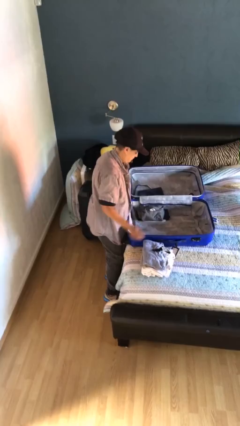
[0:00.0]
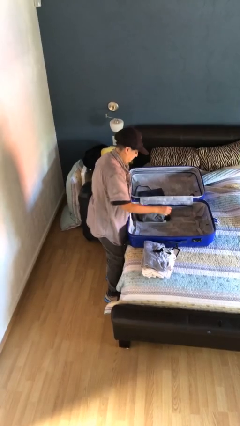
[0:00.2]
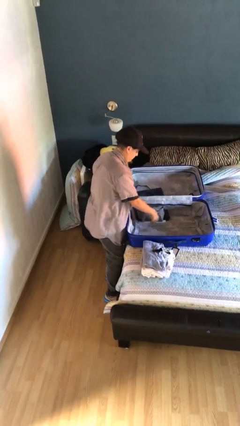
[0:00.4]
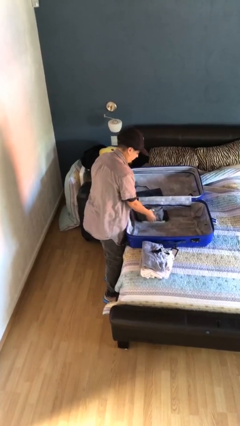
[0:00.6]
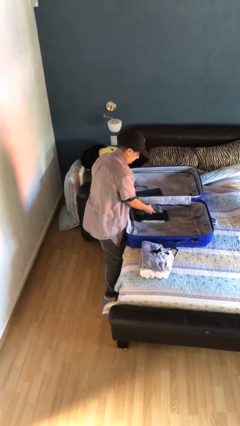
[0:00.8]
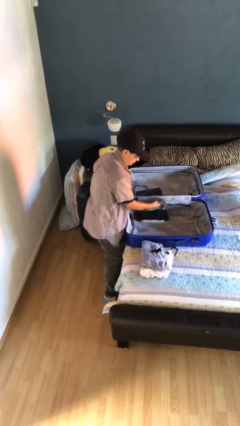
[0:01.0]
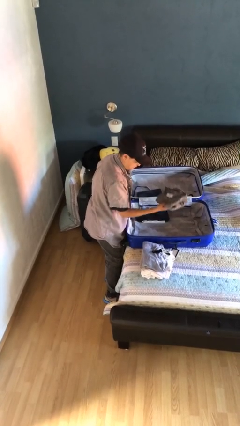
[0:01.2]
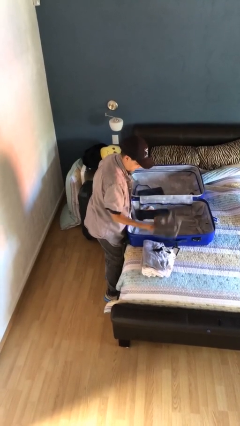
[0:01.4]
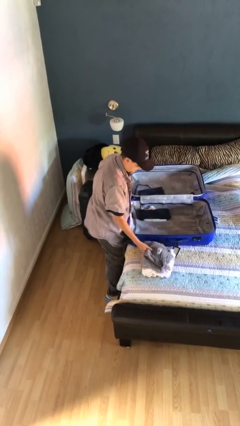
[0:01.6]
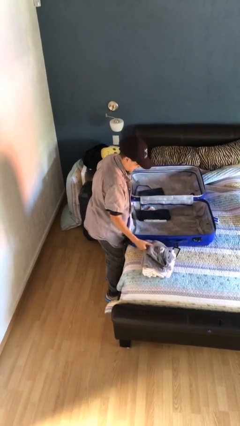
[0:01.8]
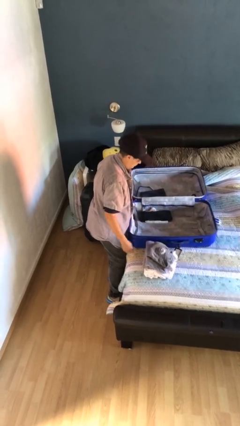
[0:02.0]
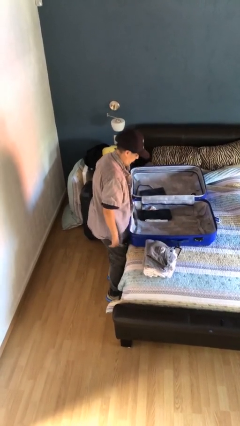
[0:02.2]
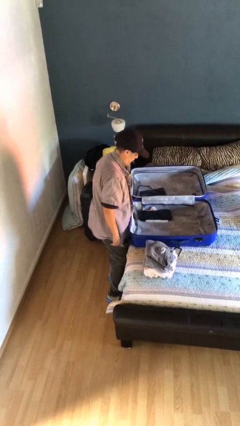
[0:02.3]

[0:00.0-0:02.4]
person unloads clothes from suitcase

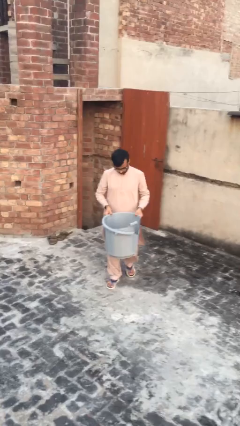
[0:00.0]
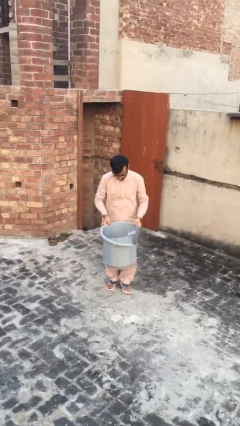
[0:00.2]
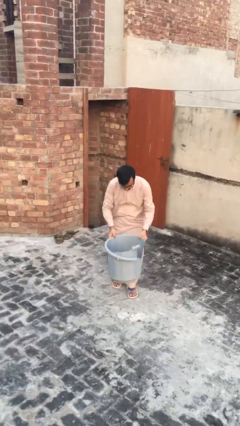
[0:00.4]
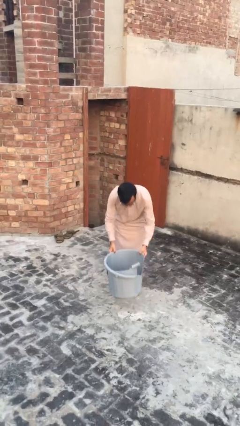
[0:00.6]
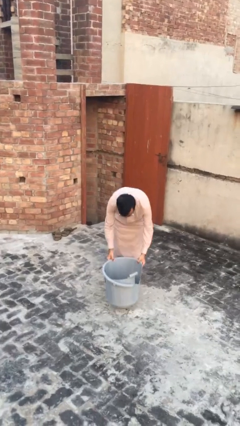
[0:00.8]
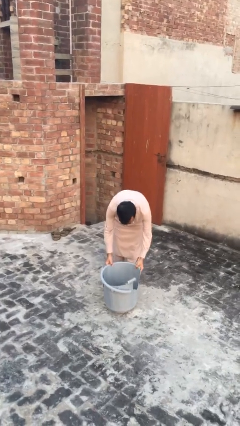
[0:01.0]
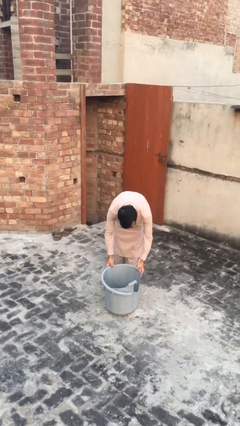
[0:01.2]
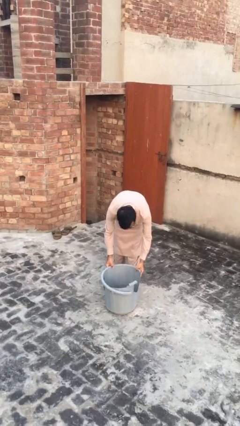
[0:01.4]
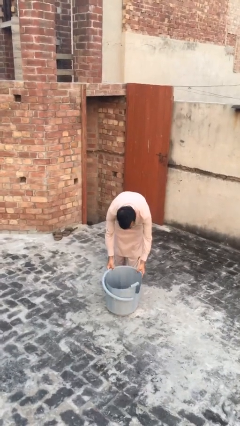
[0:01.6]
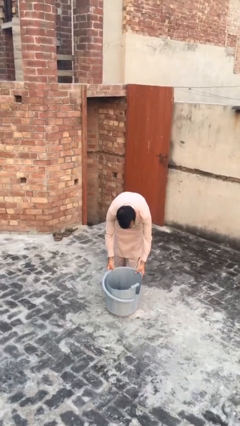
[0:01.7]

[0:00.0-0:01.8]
person puts down object on floor

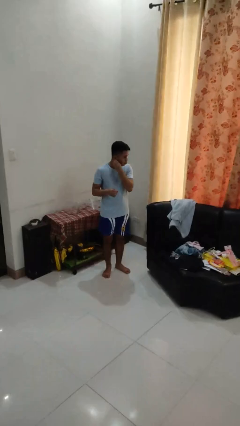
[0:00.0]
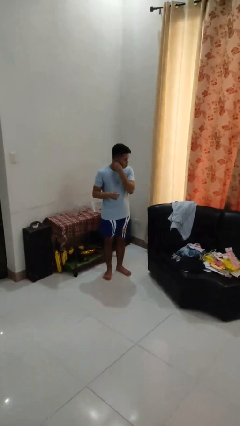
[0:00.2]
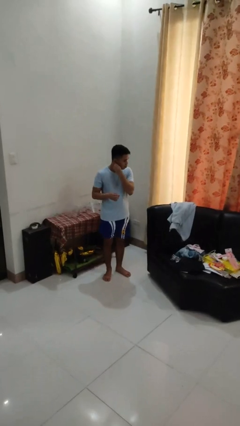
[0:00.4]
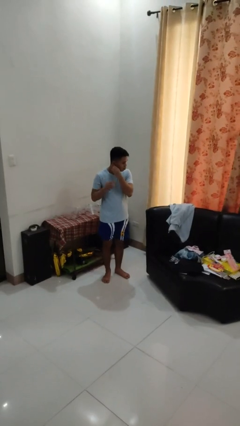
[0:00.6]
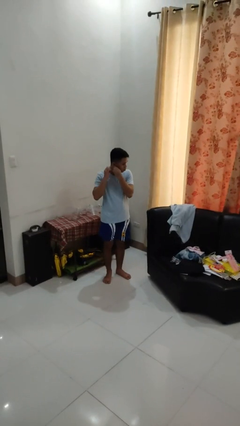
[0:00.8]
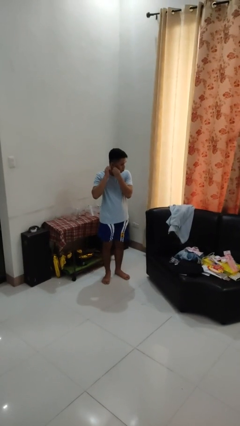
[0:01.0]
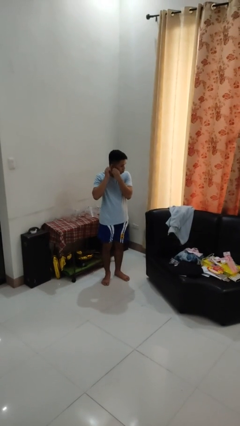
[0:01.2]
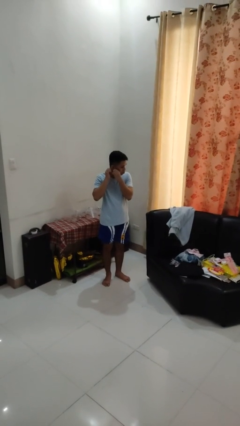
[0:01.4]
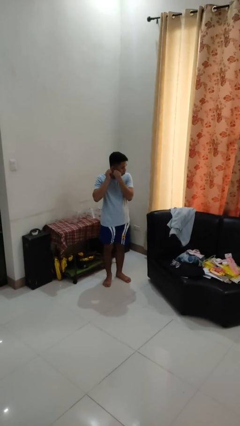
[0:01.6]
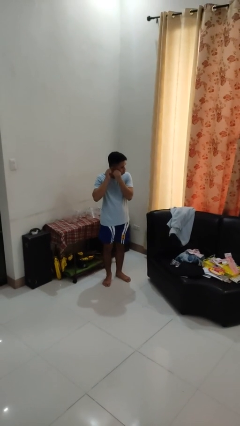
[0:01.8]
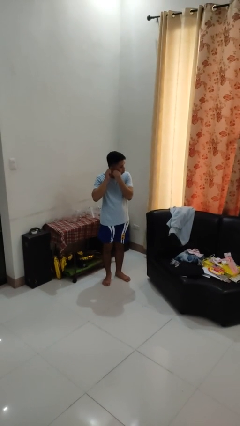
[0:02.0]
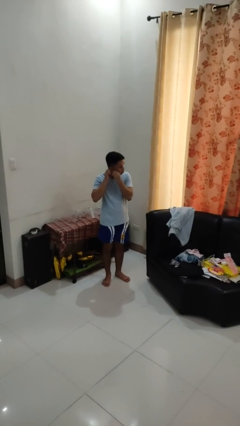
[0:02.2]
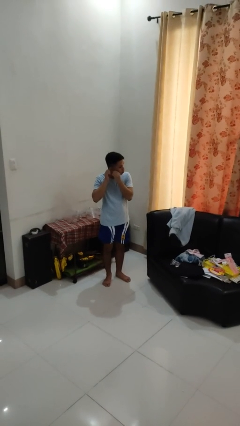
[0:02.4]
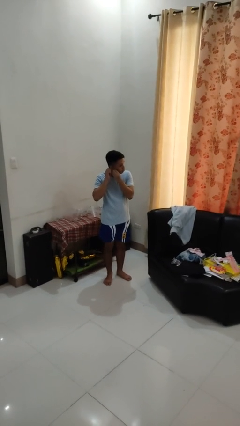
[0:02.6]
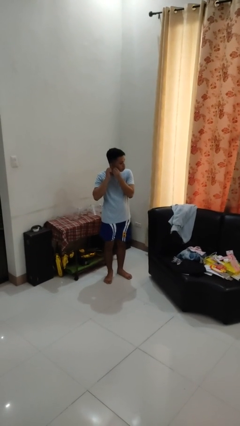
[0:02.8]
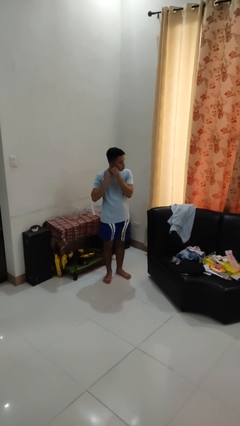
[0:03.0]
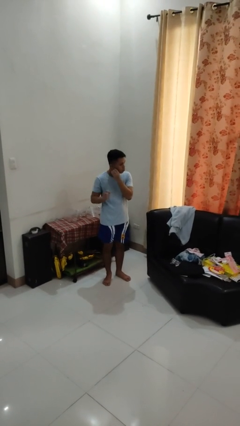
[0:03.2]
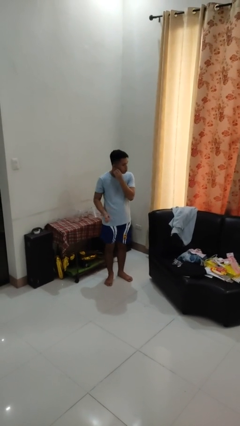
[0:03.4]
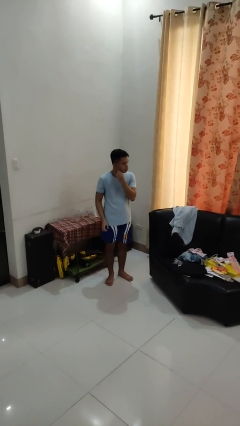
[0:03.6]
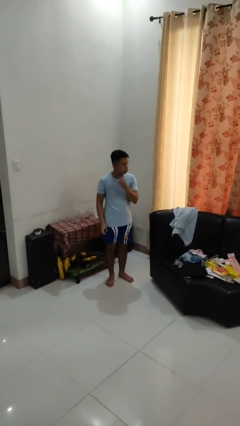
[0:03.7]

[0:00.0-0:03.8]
person puts on earrings

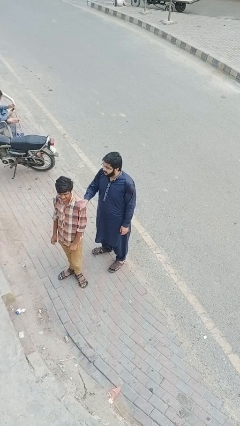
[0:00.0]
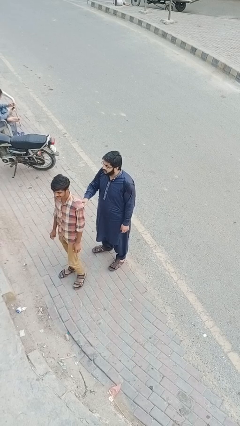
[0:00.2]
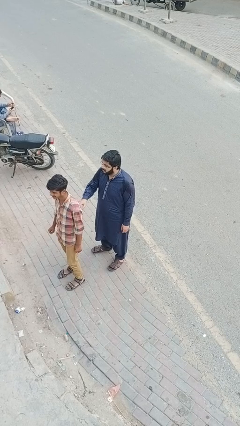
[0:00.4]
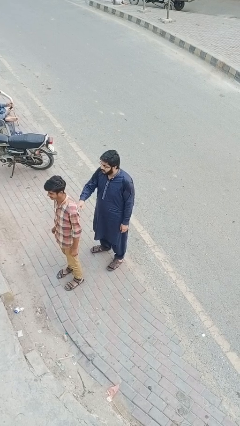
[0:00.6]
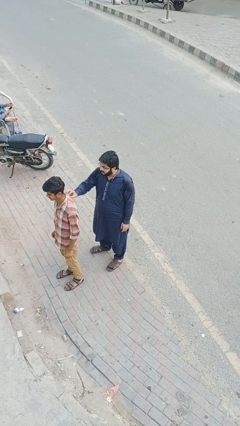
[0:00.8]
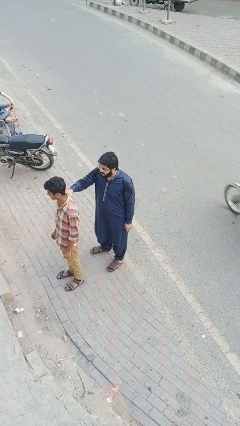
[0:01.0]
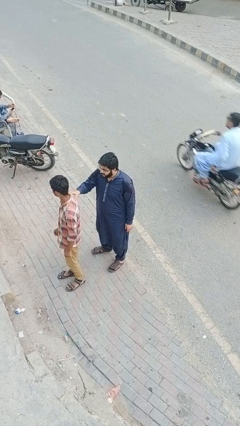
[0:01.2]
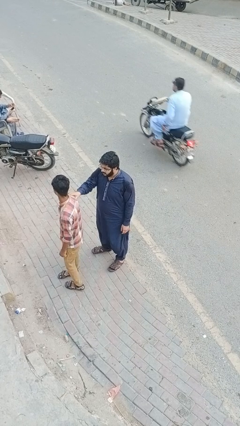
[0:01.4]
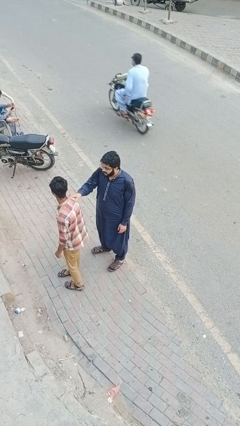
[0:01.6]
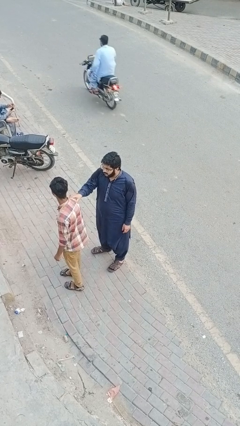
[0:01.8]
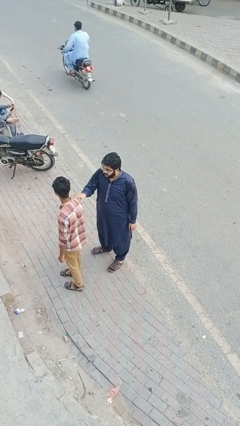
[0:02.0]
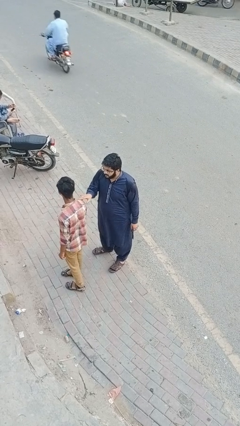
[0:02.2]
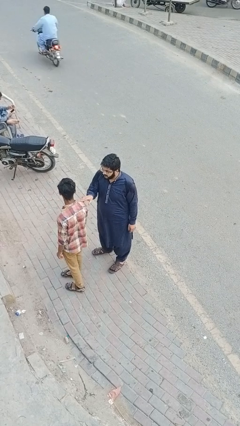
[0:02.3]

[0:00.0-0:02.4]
person grabs person by shoulder

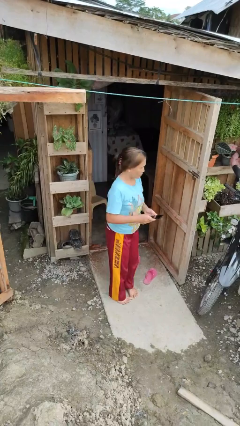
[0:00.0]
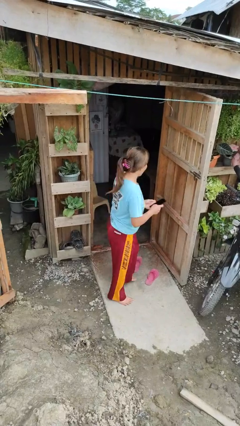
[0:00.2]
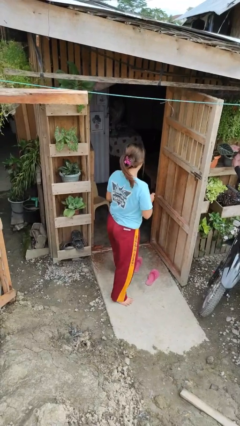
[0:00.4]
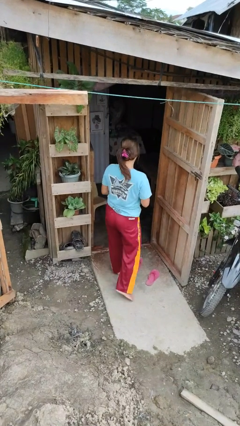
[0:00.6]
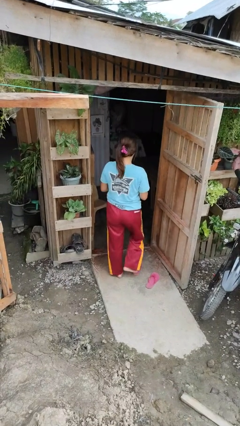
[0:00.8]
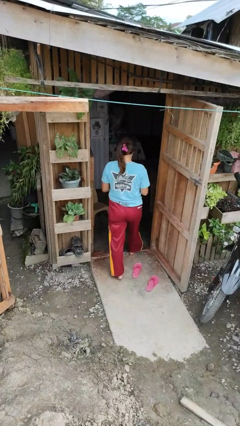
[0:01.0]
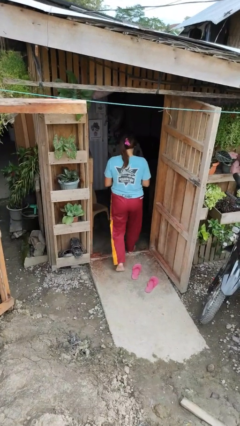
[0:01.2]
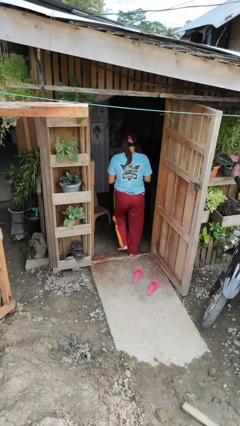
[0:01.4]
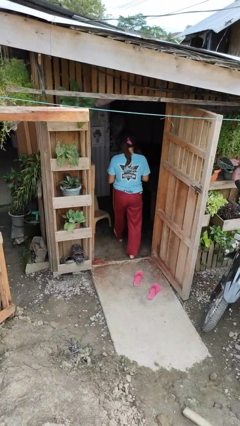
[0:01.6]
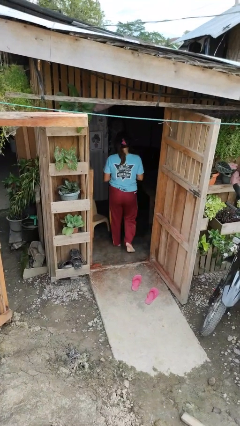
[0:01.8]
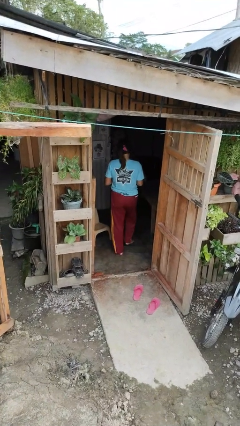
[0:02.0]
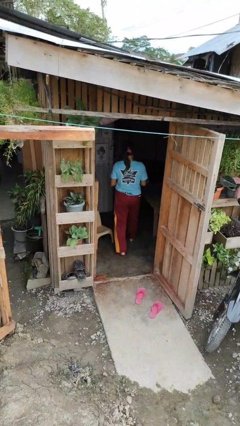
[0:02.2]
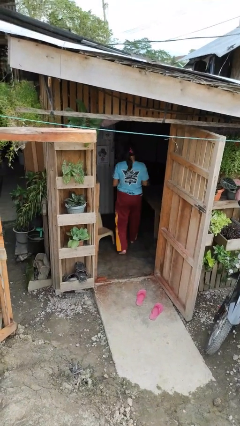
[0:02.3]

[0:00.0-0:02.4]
person exits scene through structure

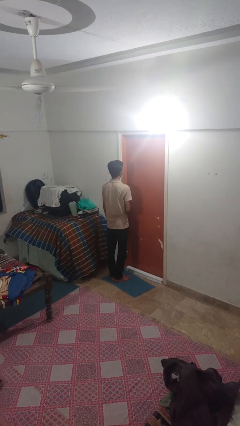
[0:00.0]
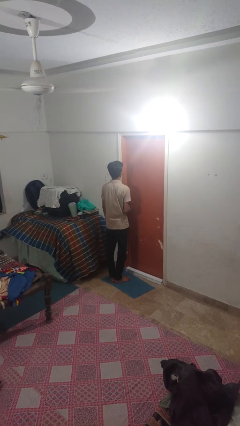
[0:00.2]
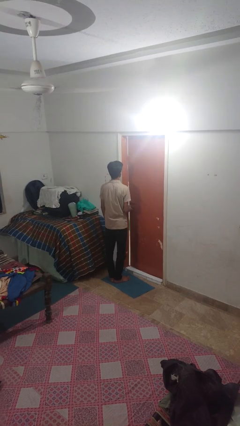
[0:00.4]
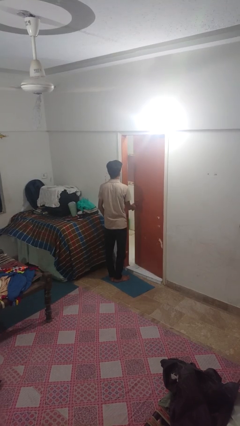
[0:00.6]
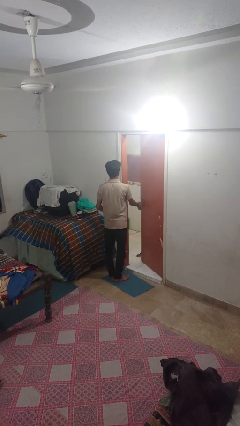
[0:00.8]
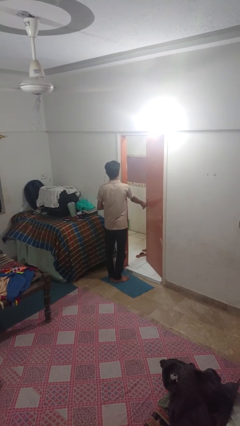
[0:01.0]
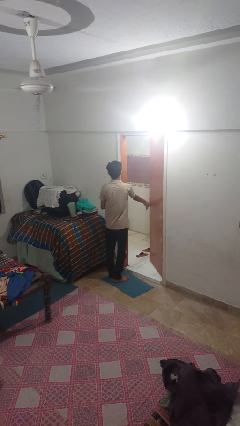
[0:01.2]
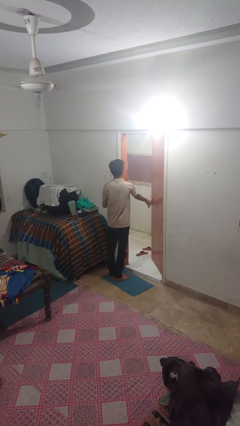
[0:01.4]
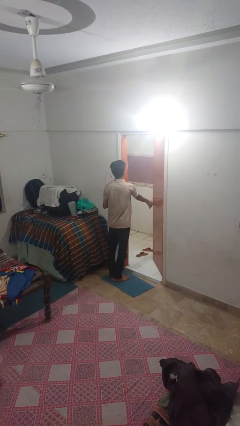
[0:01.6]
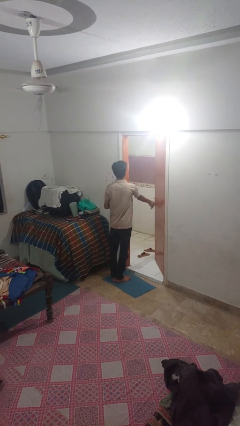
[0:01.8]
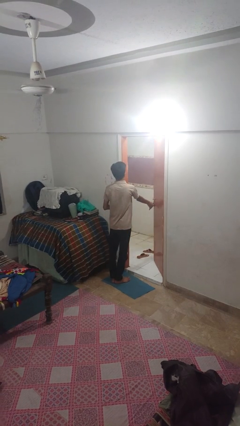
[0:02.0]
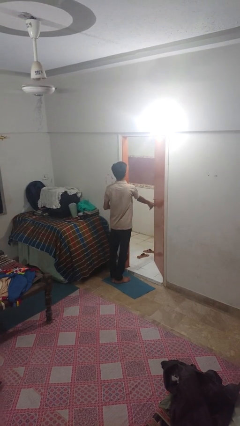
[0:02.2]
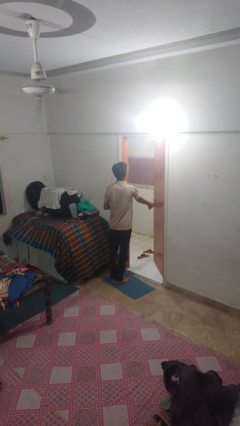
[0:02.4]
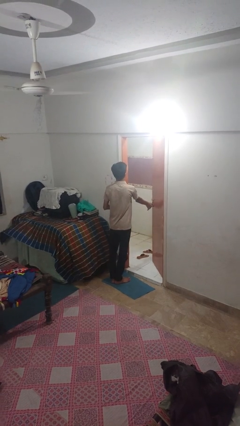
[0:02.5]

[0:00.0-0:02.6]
person opens facility door

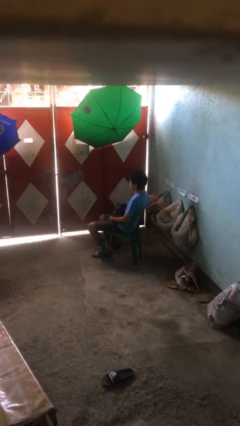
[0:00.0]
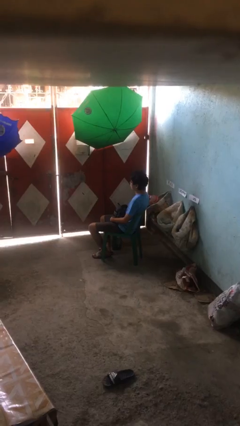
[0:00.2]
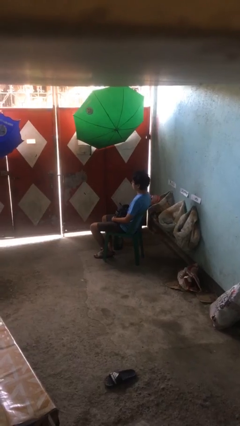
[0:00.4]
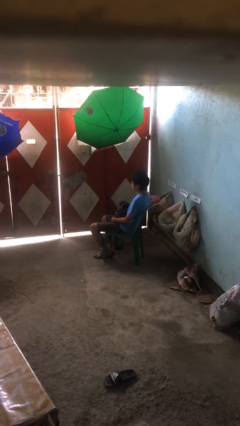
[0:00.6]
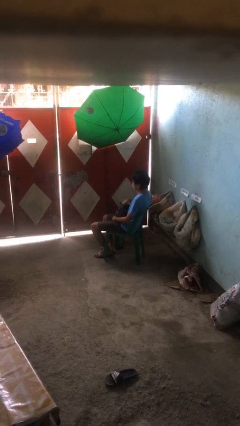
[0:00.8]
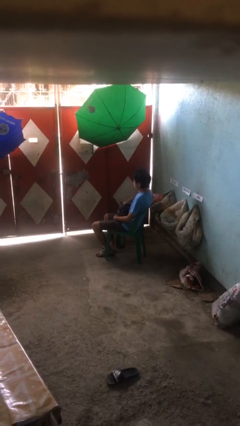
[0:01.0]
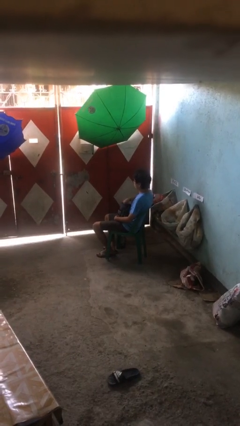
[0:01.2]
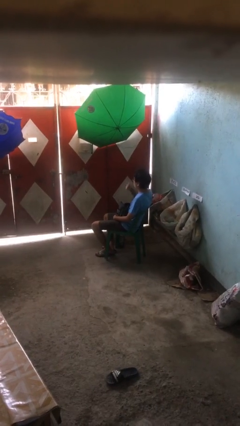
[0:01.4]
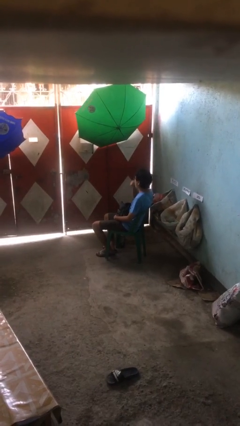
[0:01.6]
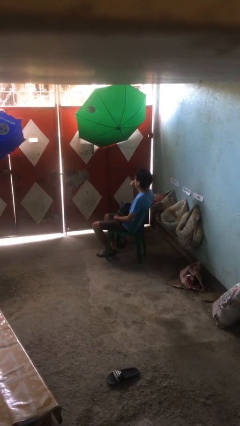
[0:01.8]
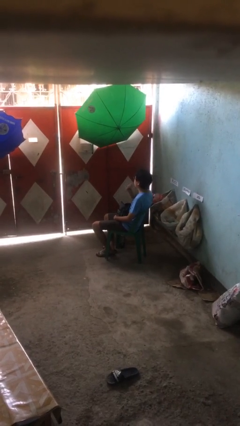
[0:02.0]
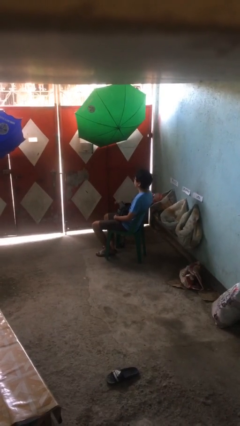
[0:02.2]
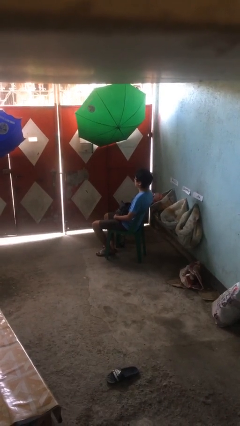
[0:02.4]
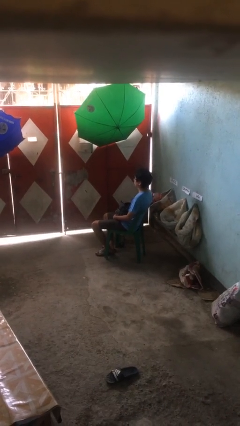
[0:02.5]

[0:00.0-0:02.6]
person eats snack from bag
